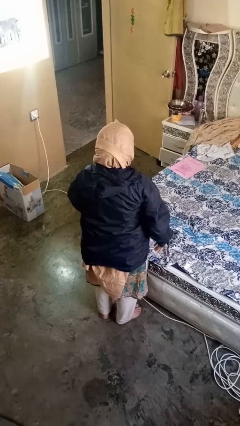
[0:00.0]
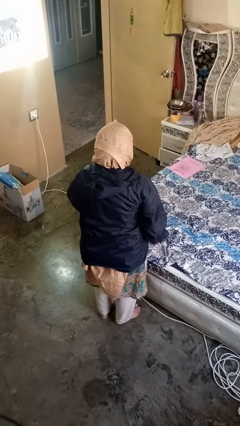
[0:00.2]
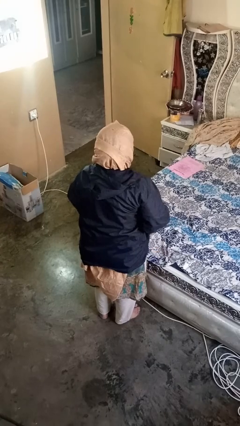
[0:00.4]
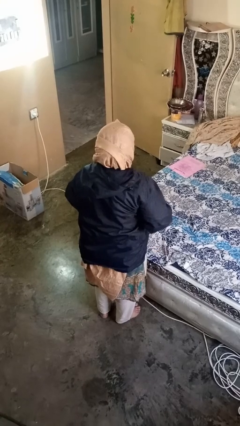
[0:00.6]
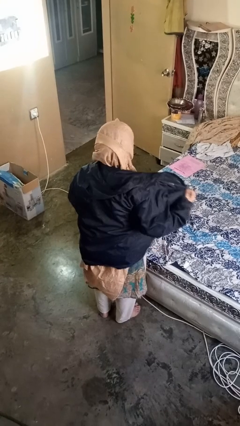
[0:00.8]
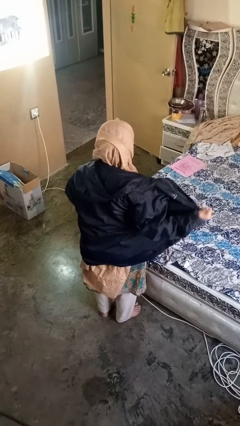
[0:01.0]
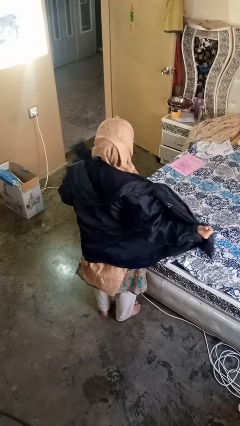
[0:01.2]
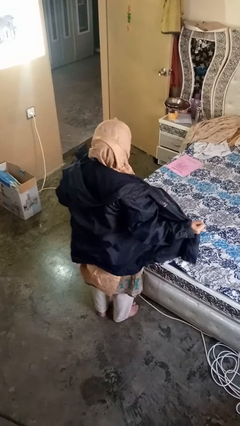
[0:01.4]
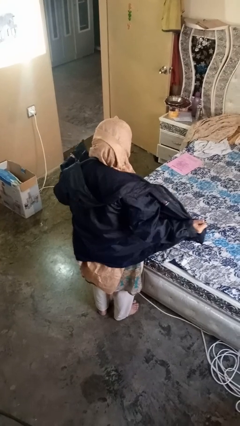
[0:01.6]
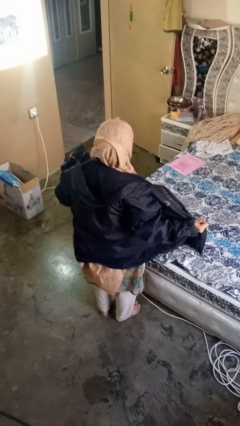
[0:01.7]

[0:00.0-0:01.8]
person unzips jacket

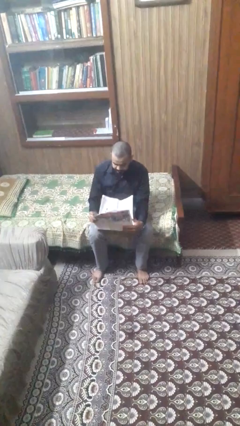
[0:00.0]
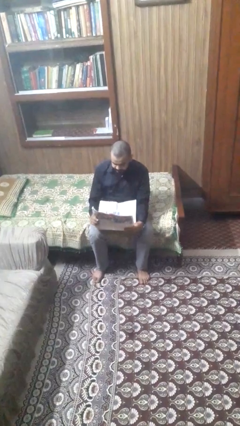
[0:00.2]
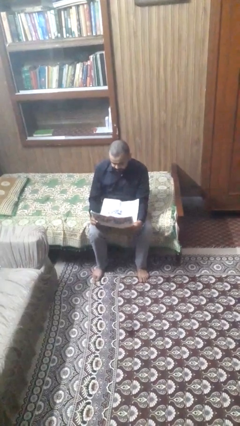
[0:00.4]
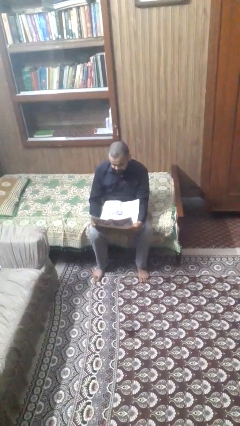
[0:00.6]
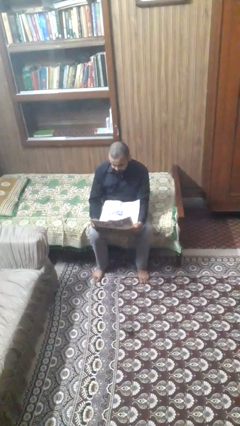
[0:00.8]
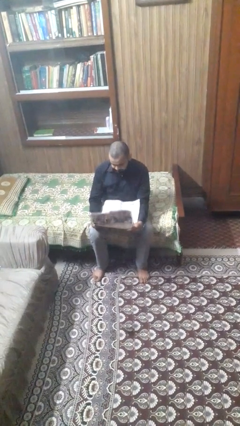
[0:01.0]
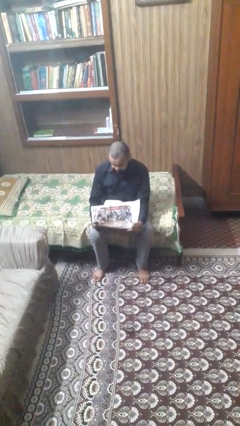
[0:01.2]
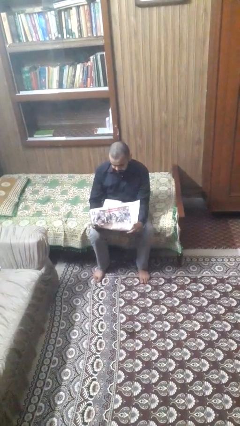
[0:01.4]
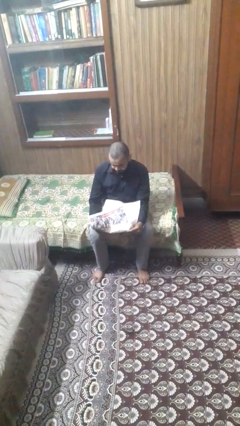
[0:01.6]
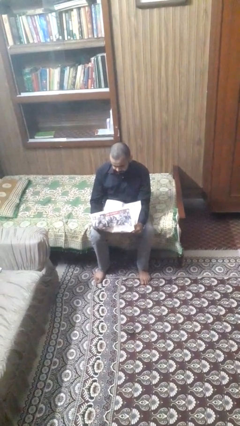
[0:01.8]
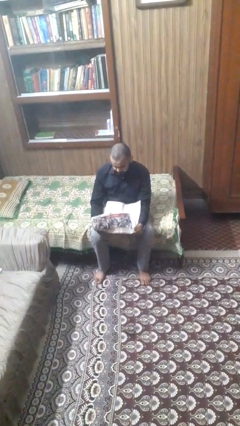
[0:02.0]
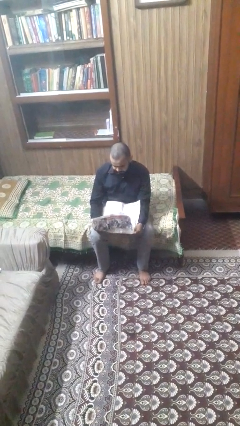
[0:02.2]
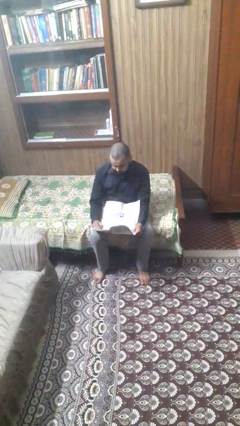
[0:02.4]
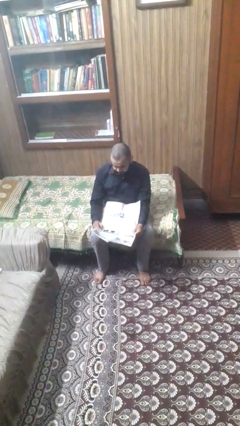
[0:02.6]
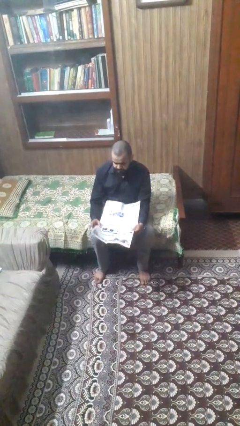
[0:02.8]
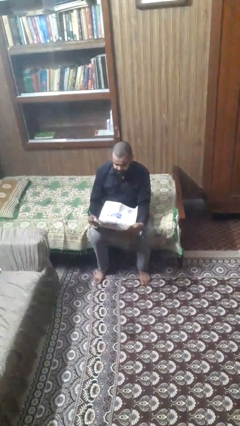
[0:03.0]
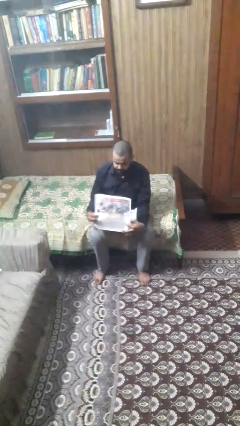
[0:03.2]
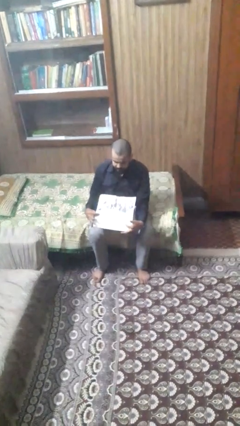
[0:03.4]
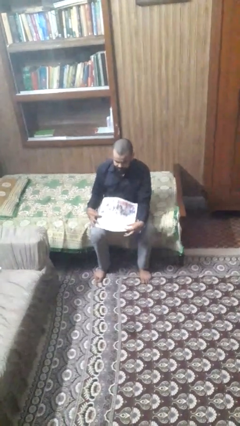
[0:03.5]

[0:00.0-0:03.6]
person reads newspaper

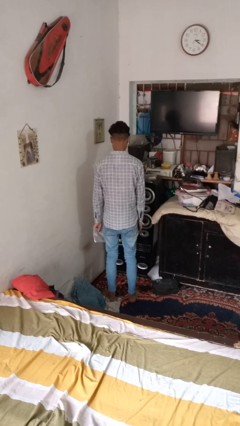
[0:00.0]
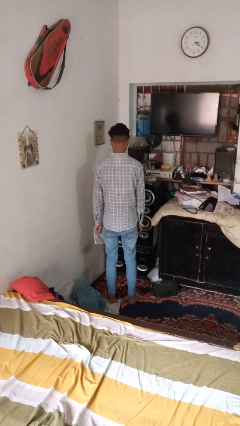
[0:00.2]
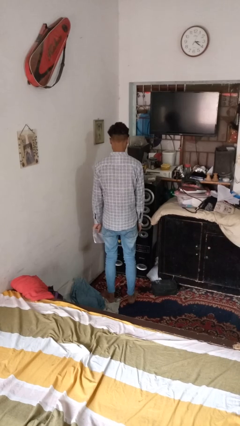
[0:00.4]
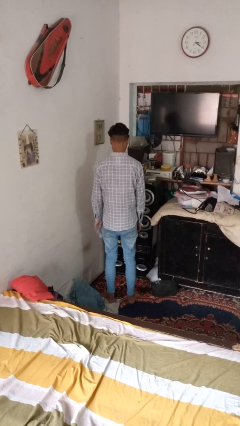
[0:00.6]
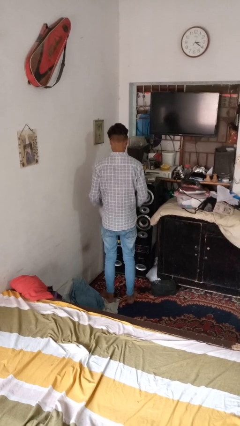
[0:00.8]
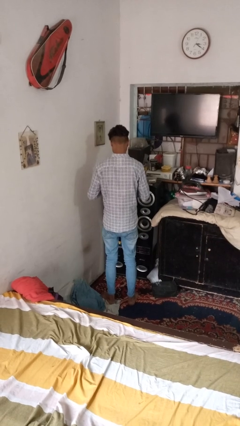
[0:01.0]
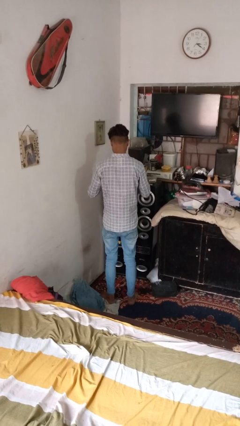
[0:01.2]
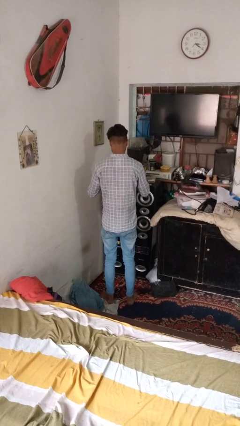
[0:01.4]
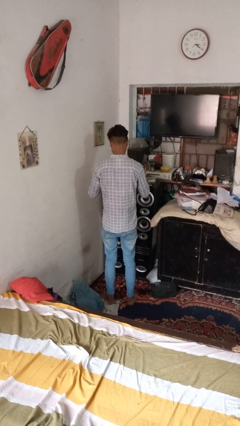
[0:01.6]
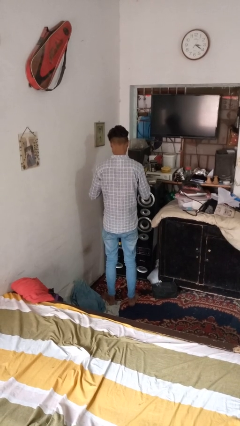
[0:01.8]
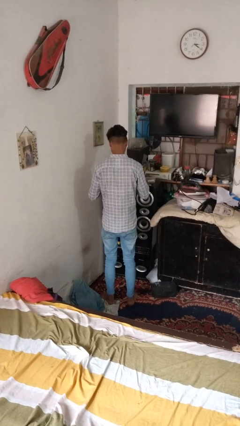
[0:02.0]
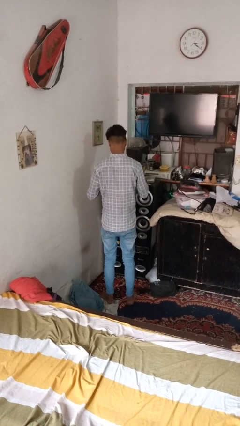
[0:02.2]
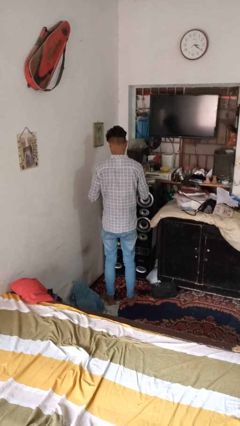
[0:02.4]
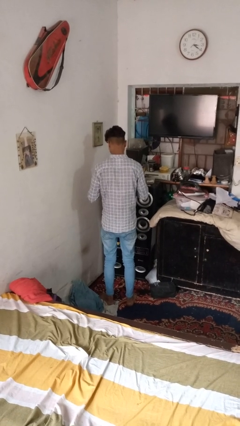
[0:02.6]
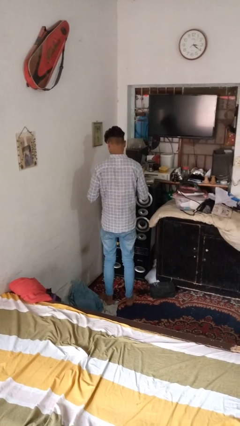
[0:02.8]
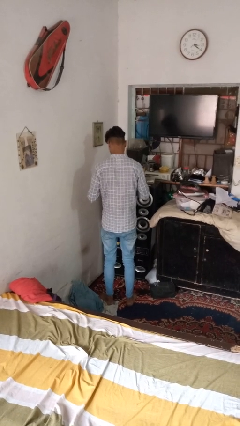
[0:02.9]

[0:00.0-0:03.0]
person tears paper

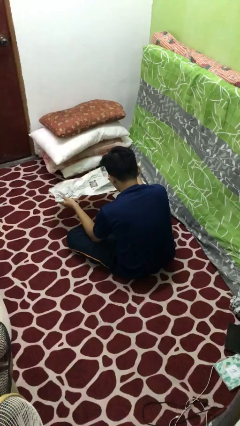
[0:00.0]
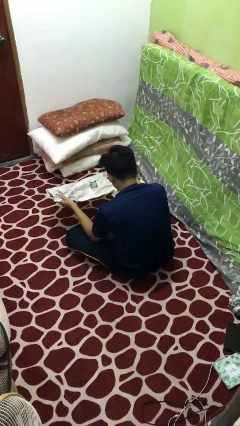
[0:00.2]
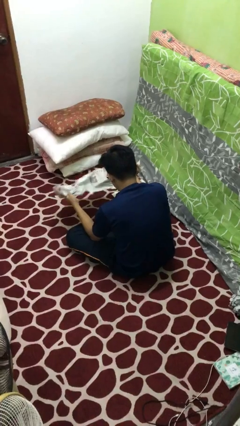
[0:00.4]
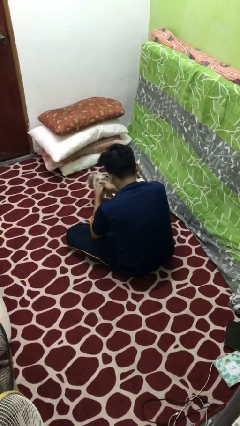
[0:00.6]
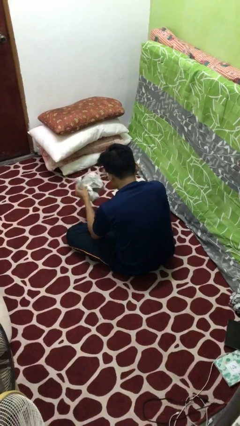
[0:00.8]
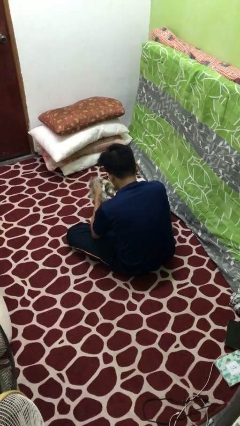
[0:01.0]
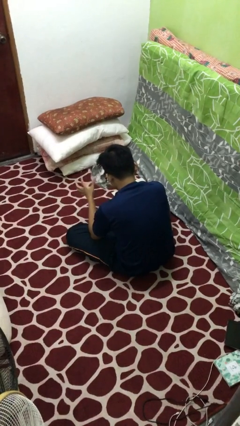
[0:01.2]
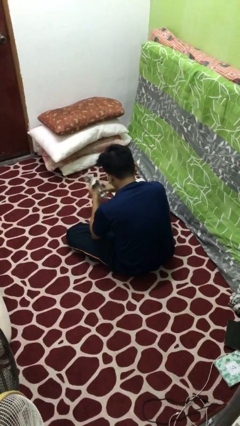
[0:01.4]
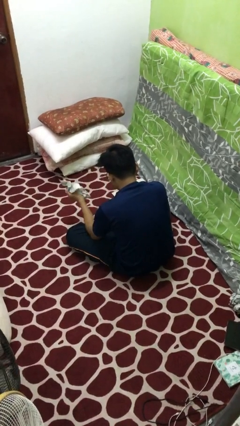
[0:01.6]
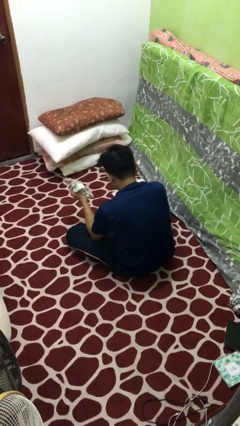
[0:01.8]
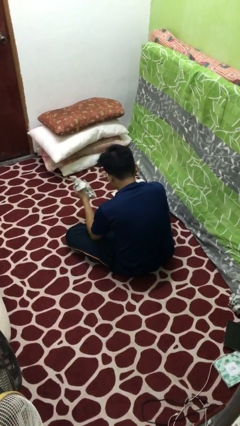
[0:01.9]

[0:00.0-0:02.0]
person crumples paper

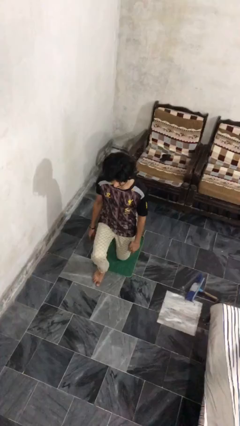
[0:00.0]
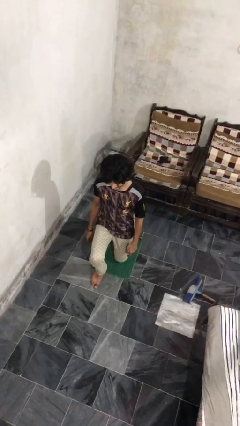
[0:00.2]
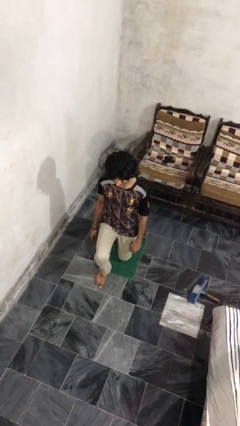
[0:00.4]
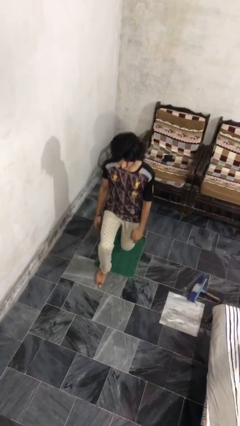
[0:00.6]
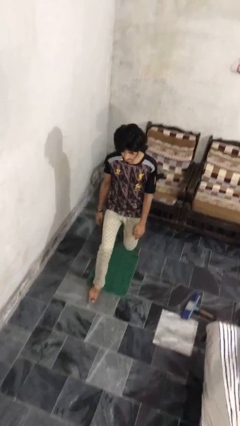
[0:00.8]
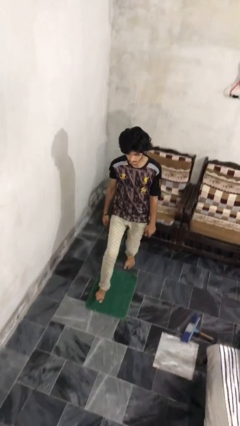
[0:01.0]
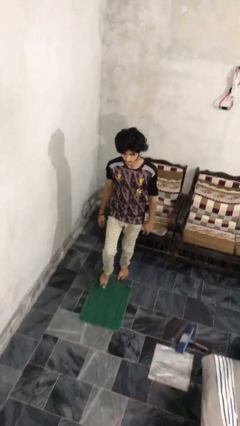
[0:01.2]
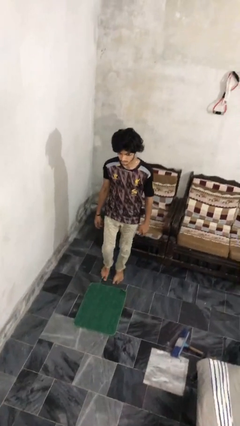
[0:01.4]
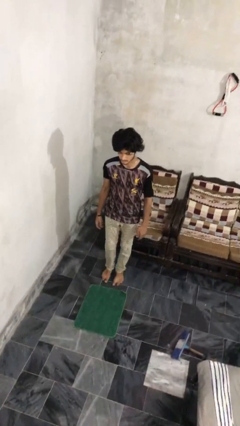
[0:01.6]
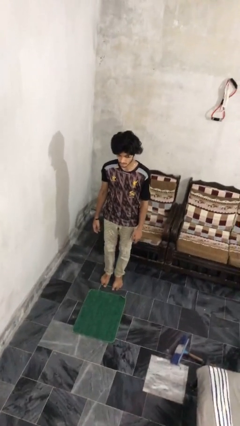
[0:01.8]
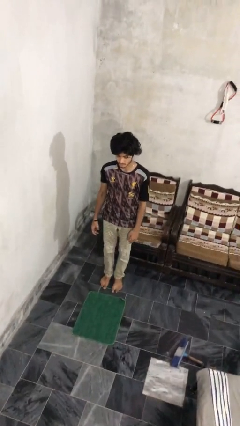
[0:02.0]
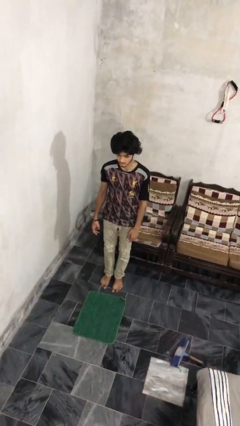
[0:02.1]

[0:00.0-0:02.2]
person stands up from floor

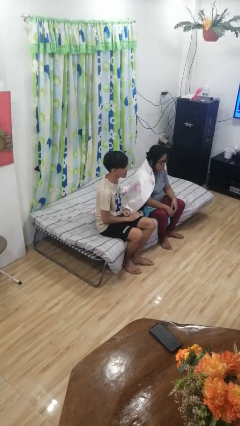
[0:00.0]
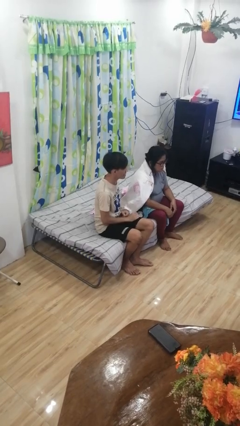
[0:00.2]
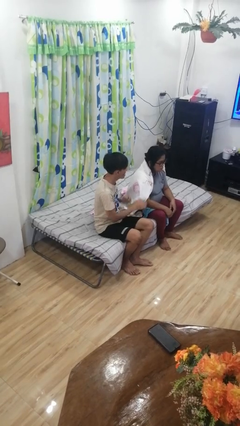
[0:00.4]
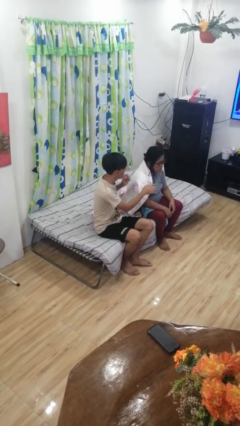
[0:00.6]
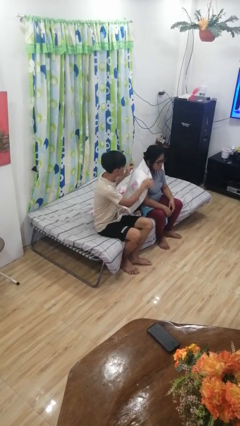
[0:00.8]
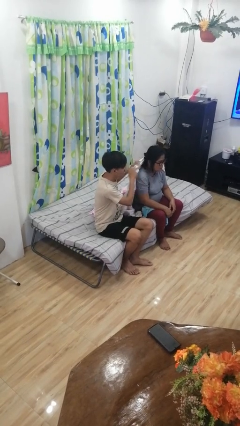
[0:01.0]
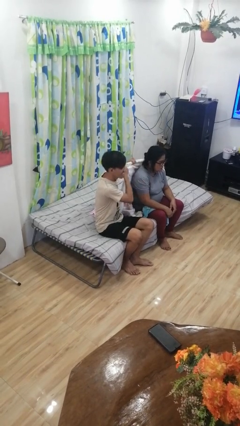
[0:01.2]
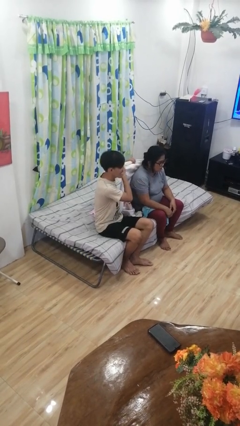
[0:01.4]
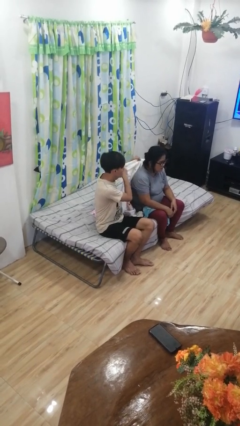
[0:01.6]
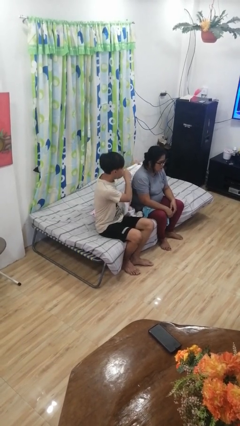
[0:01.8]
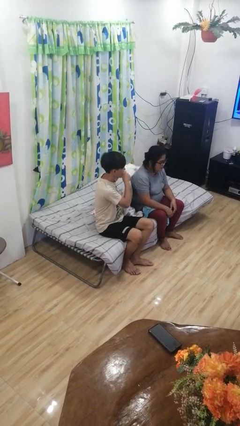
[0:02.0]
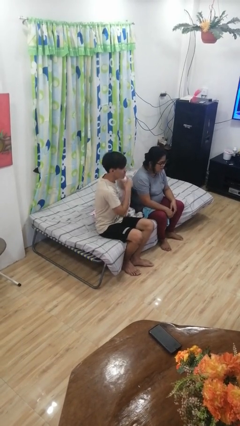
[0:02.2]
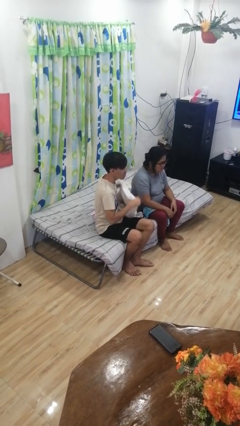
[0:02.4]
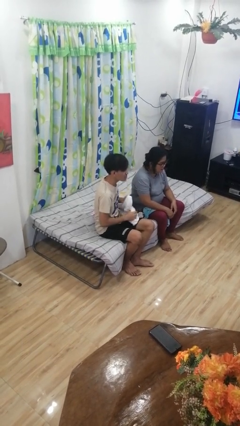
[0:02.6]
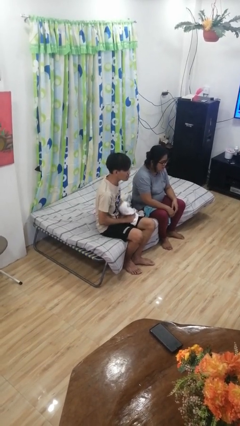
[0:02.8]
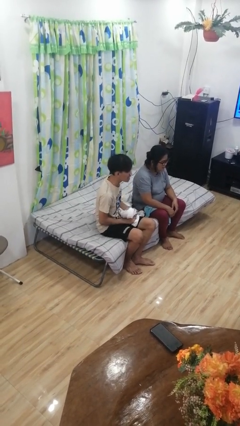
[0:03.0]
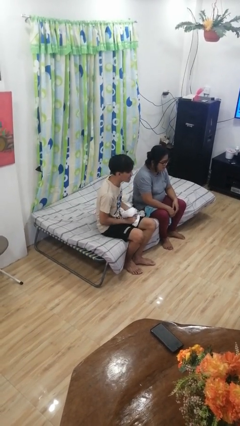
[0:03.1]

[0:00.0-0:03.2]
person uncovers friend with blanket

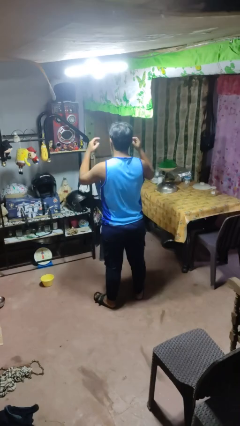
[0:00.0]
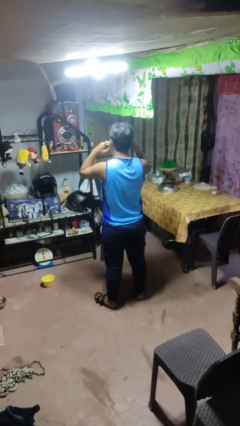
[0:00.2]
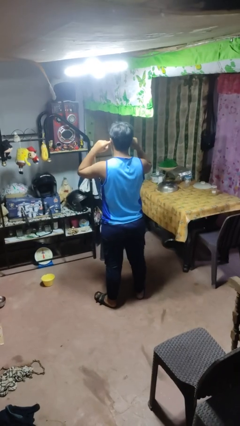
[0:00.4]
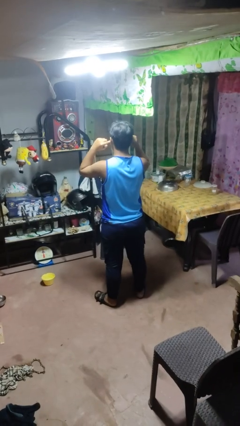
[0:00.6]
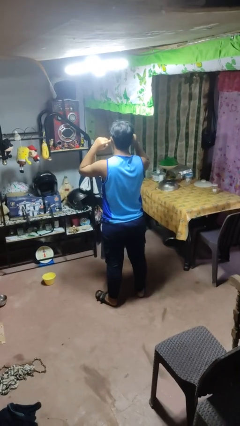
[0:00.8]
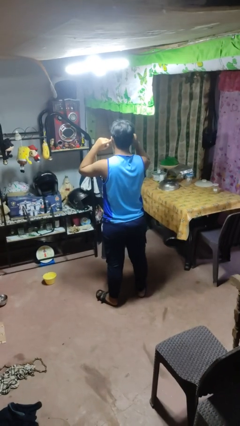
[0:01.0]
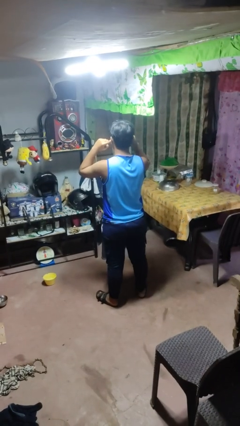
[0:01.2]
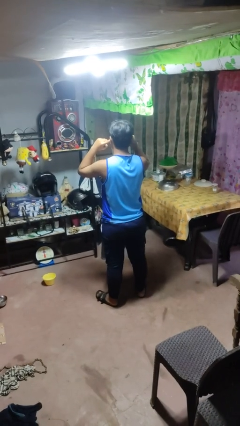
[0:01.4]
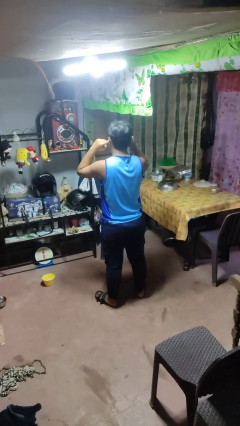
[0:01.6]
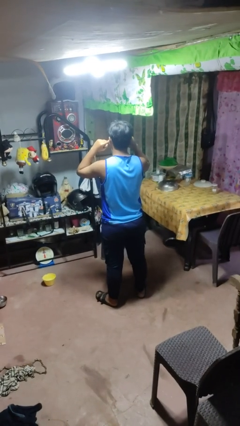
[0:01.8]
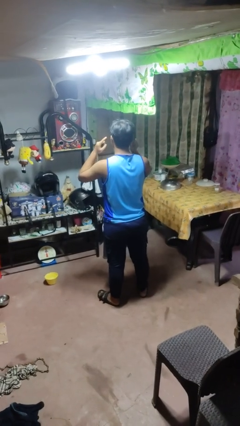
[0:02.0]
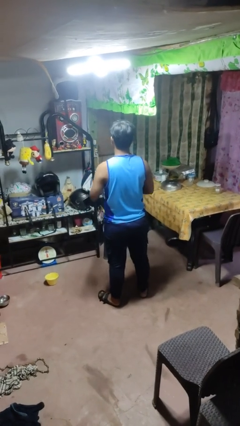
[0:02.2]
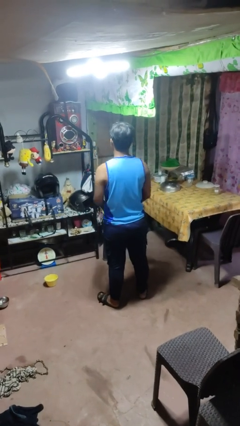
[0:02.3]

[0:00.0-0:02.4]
person puts fingers in ear
